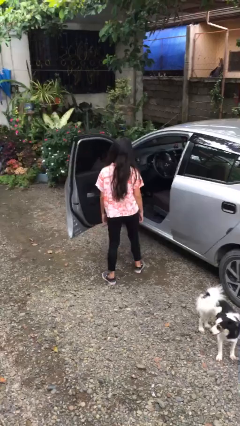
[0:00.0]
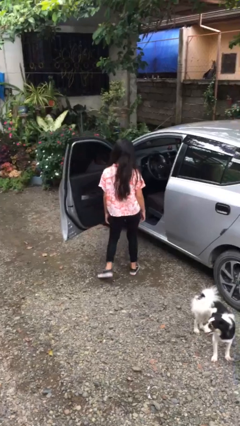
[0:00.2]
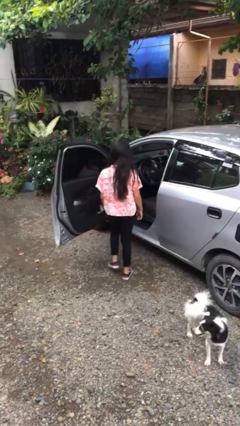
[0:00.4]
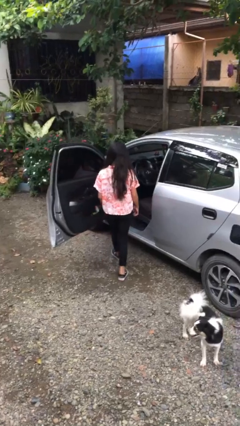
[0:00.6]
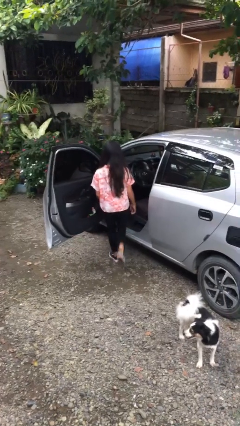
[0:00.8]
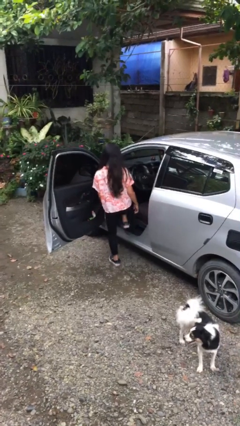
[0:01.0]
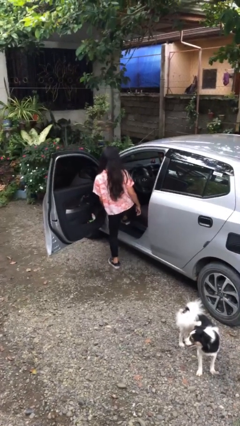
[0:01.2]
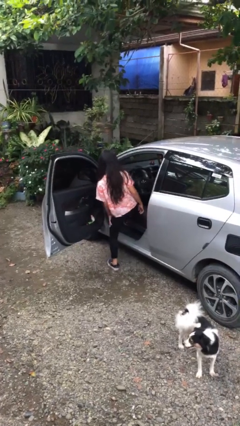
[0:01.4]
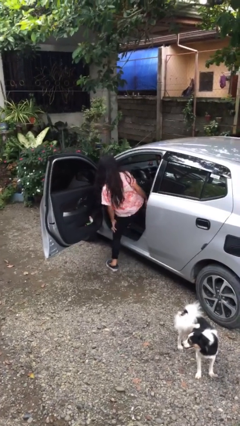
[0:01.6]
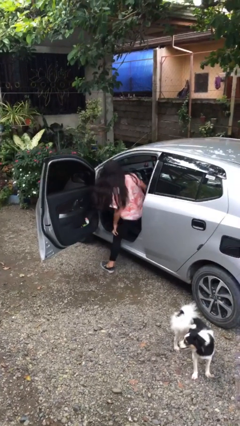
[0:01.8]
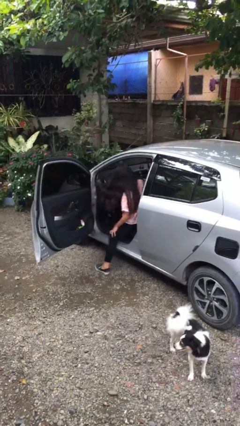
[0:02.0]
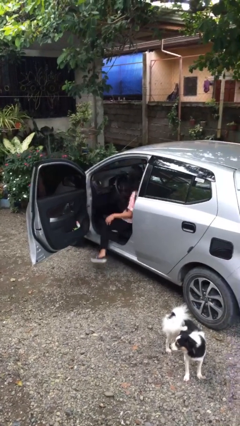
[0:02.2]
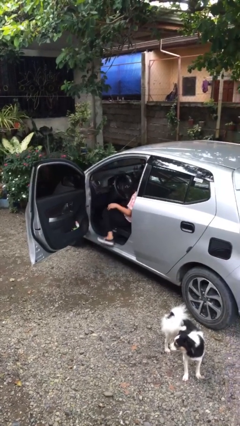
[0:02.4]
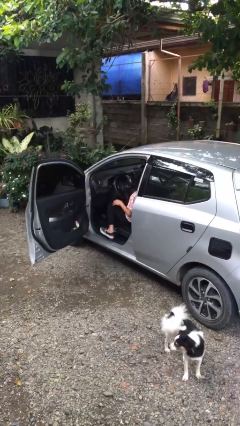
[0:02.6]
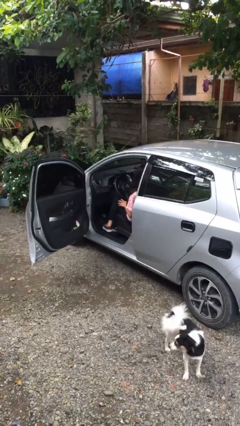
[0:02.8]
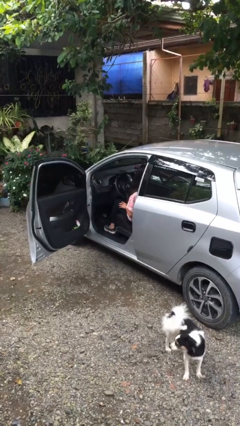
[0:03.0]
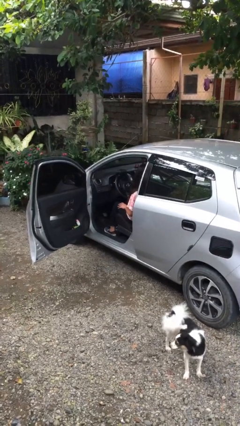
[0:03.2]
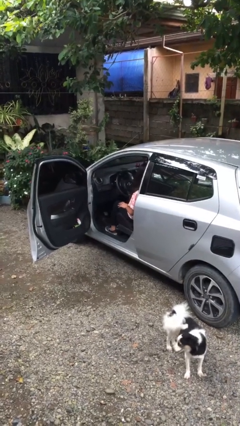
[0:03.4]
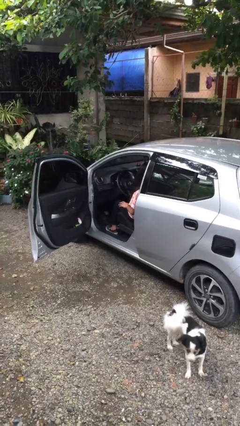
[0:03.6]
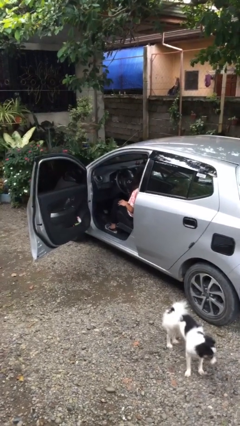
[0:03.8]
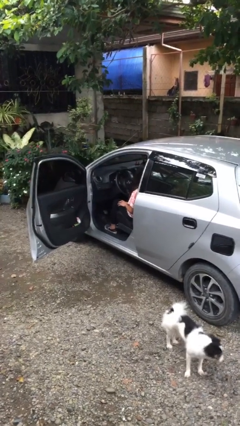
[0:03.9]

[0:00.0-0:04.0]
person enters car

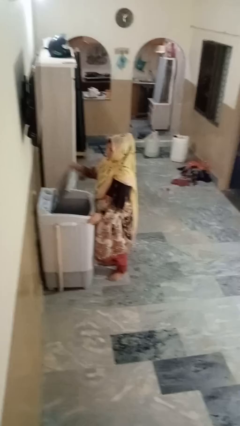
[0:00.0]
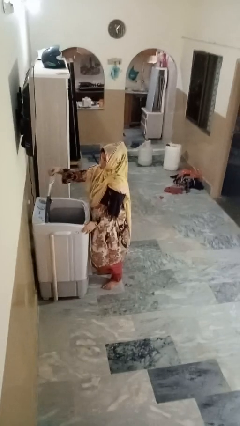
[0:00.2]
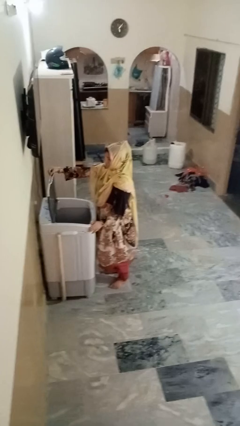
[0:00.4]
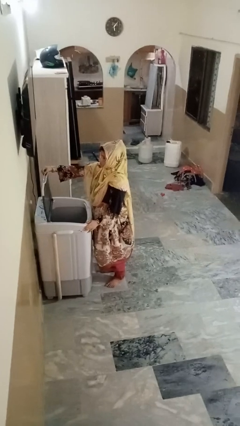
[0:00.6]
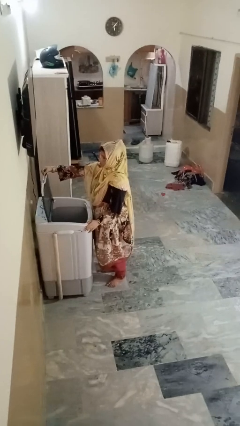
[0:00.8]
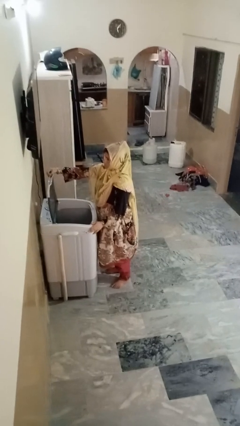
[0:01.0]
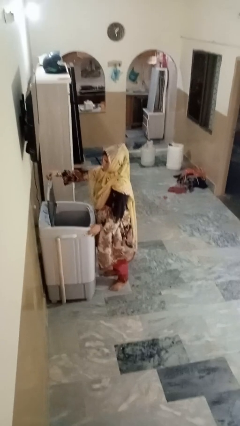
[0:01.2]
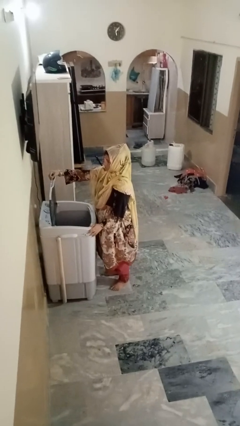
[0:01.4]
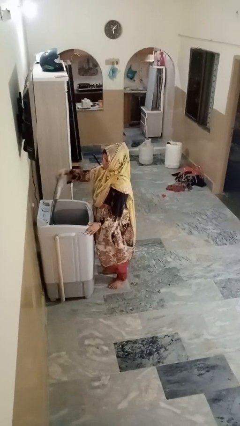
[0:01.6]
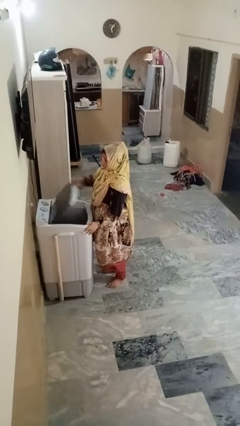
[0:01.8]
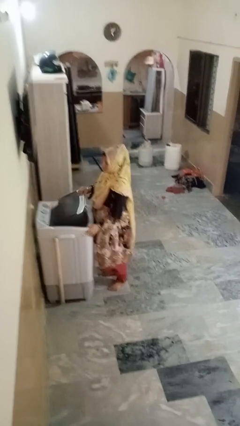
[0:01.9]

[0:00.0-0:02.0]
person opens clothes washer

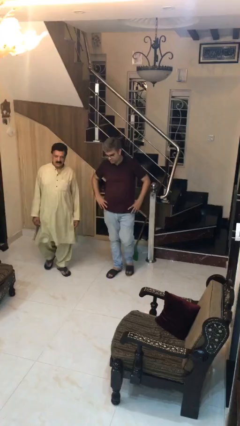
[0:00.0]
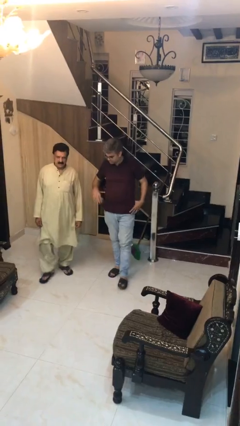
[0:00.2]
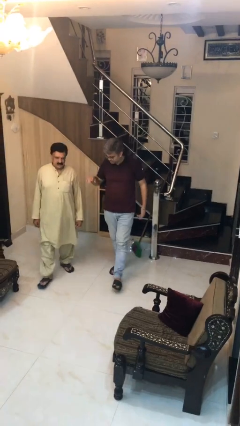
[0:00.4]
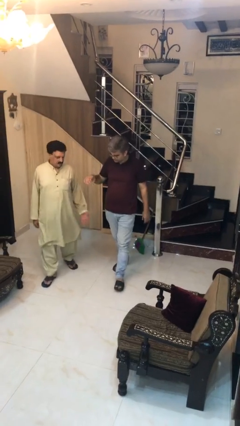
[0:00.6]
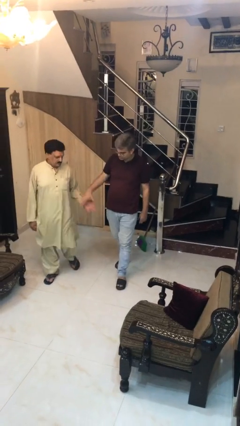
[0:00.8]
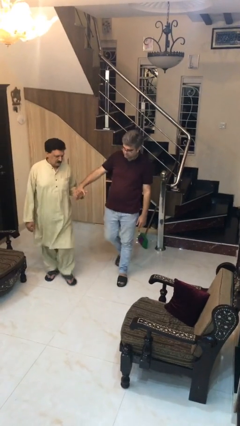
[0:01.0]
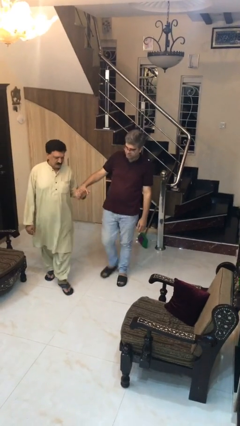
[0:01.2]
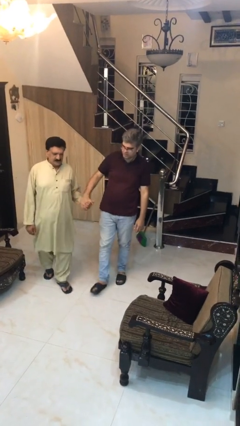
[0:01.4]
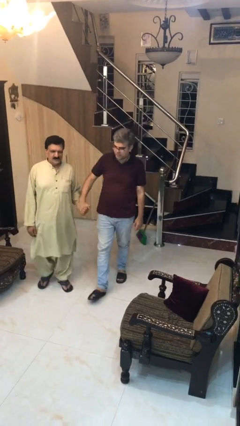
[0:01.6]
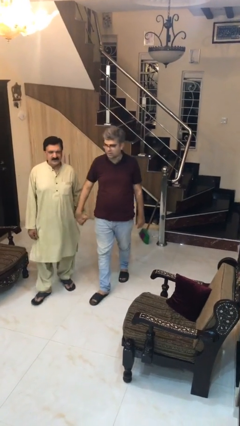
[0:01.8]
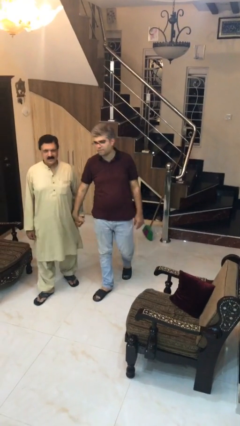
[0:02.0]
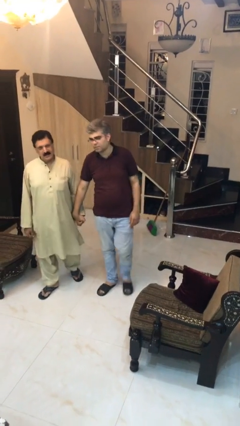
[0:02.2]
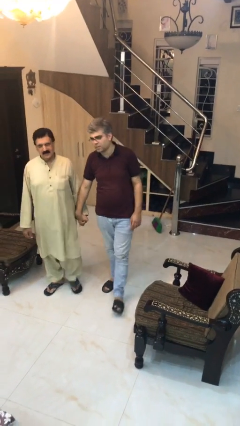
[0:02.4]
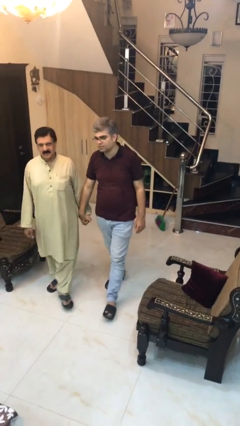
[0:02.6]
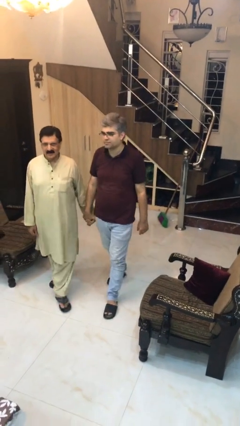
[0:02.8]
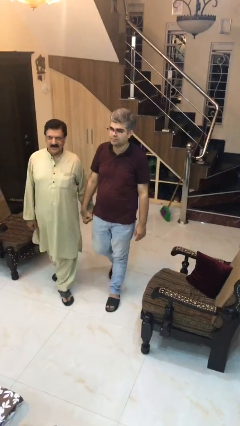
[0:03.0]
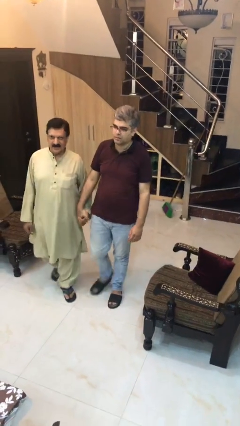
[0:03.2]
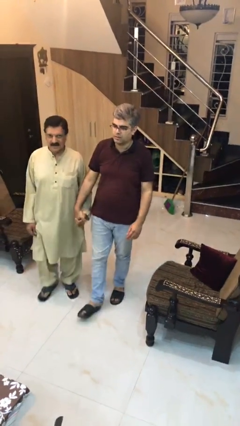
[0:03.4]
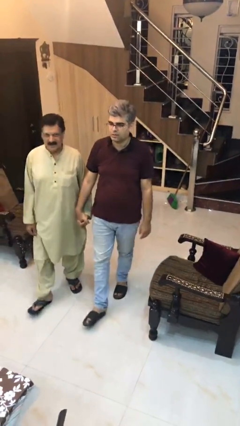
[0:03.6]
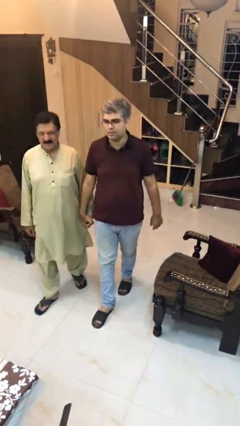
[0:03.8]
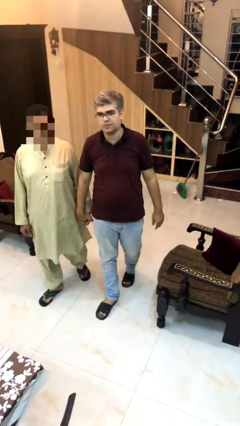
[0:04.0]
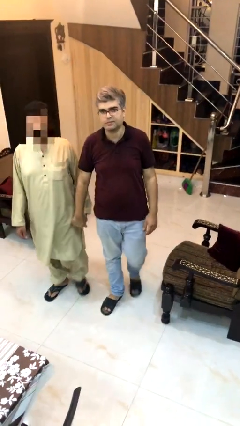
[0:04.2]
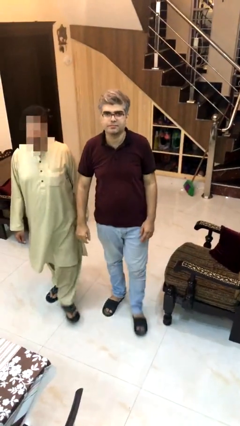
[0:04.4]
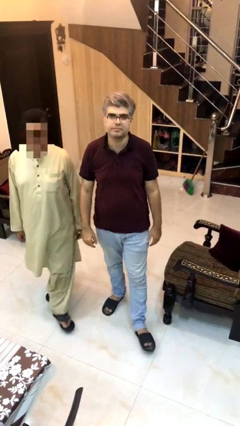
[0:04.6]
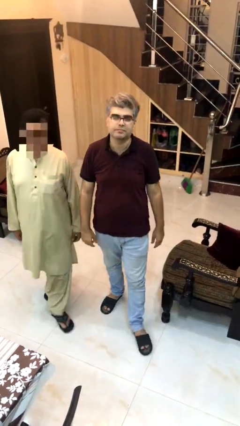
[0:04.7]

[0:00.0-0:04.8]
person holds hand

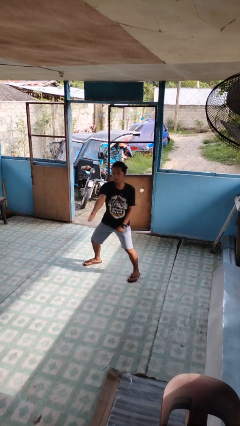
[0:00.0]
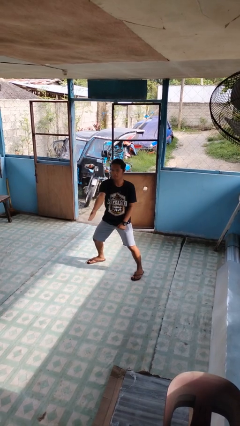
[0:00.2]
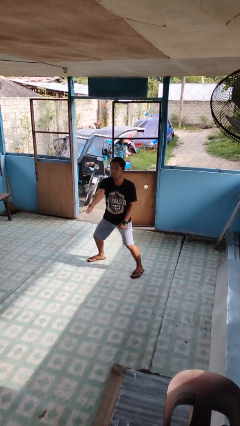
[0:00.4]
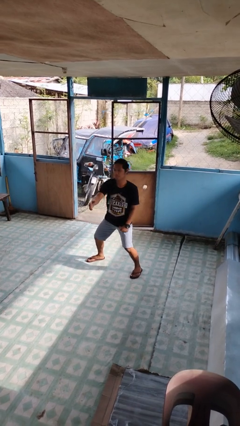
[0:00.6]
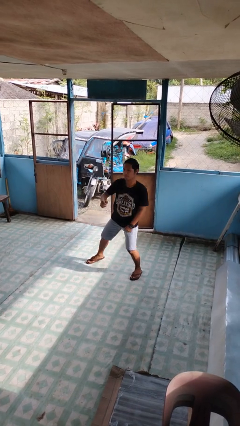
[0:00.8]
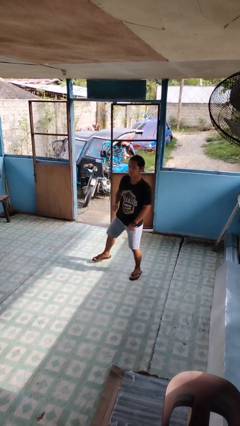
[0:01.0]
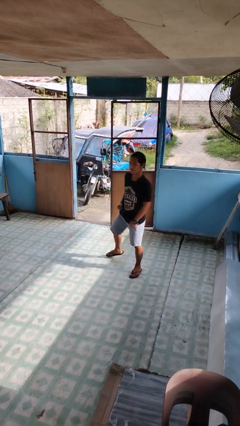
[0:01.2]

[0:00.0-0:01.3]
person karate chop

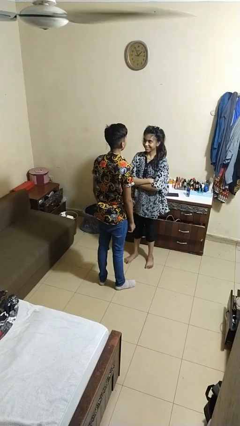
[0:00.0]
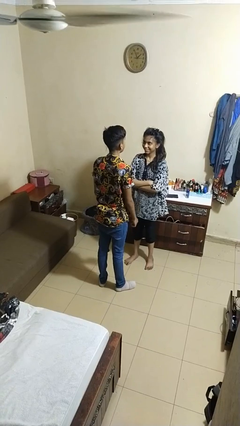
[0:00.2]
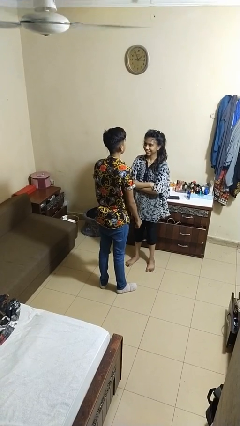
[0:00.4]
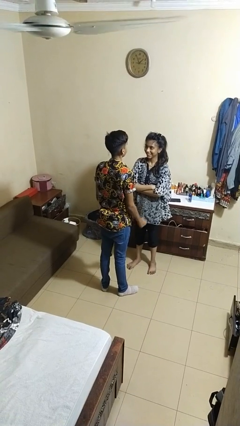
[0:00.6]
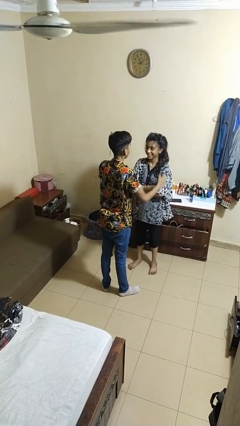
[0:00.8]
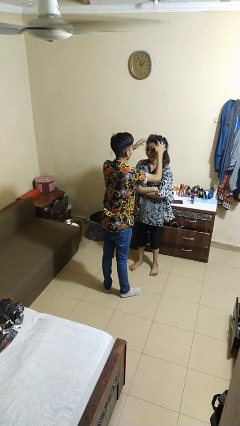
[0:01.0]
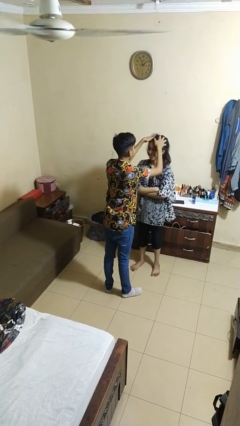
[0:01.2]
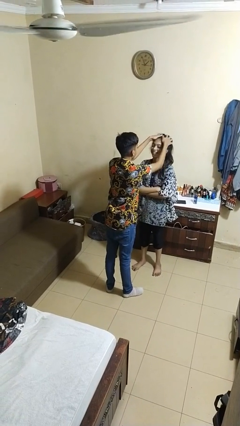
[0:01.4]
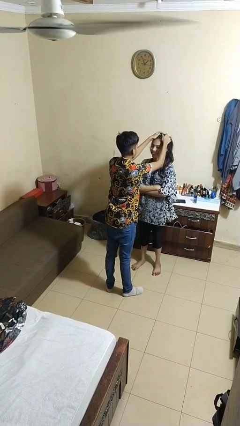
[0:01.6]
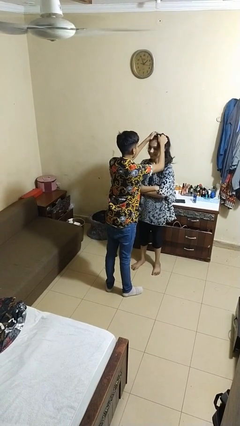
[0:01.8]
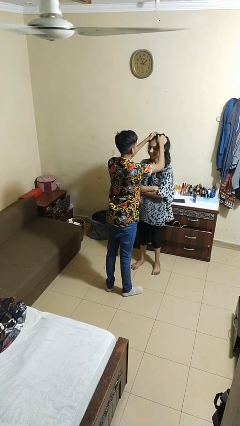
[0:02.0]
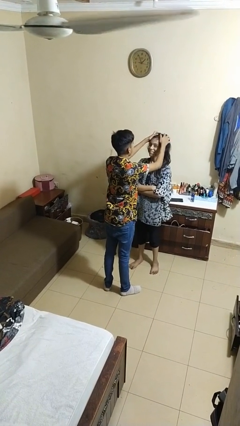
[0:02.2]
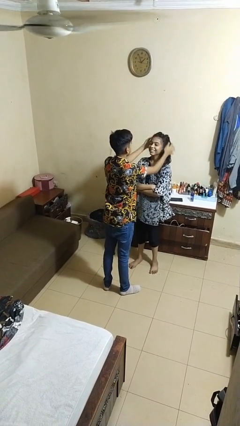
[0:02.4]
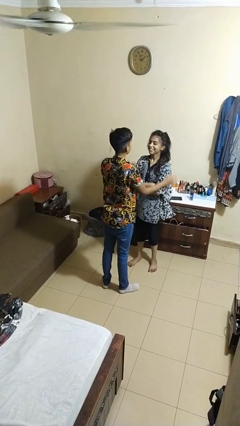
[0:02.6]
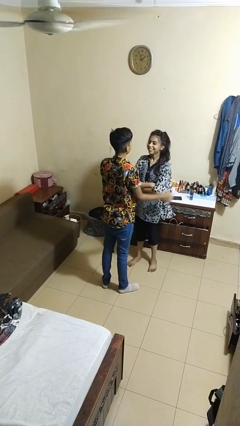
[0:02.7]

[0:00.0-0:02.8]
person grabs person by hair

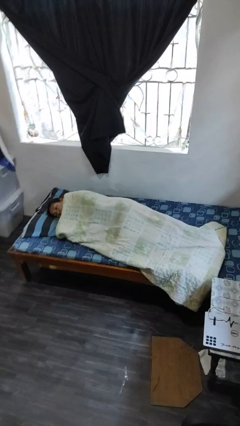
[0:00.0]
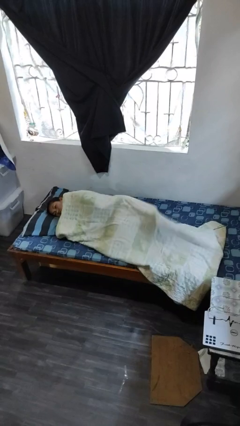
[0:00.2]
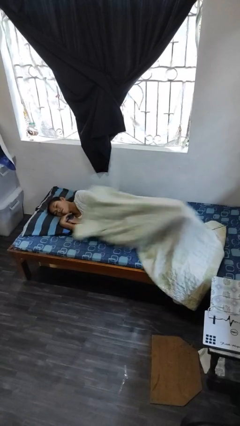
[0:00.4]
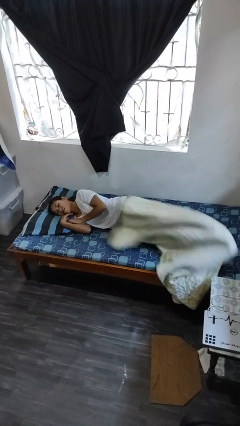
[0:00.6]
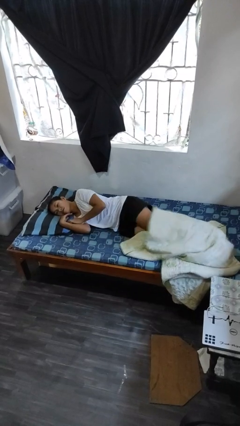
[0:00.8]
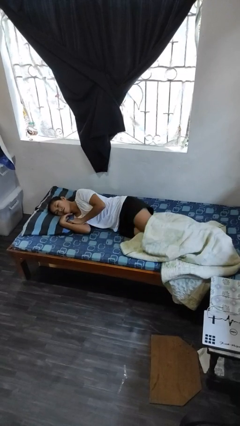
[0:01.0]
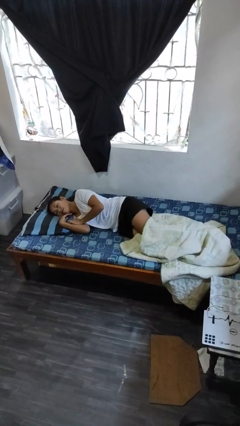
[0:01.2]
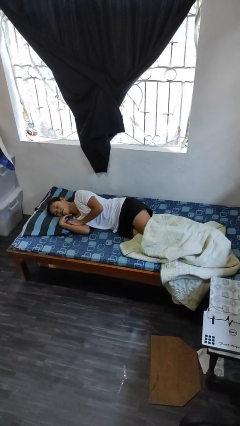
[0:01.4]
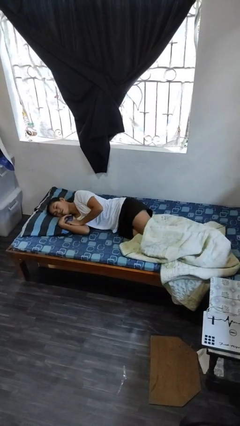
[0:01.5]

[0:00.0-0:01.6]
person uncovers with bedsheets

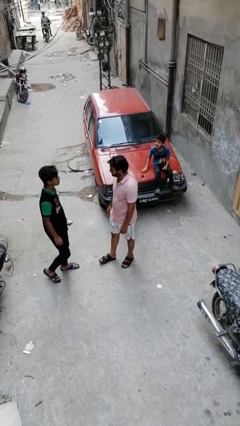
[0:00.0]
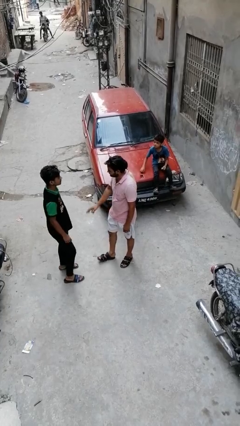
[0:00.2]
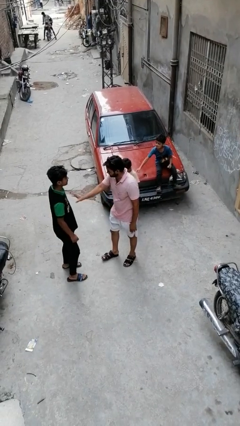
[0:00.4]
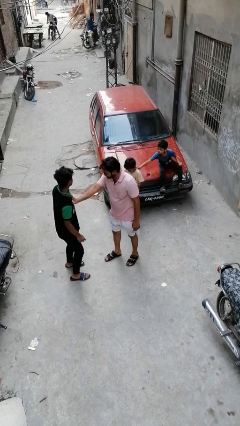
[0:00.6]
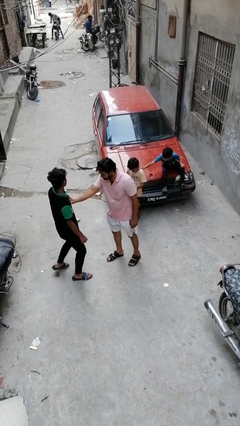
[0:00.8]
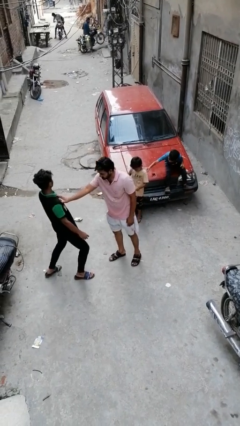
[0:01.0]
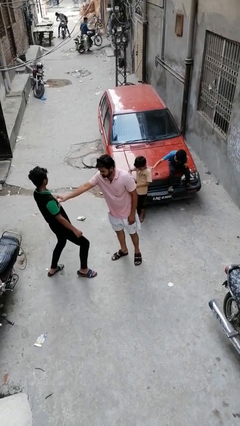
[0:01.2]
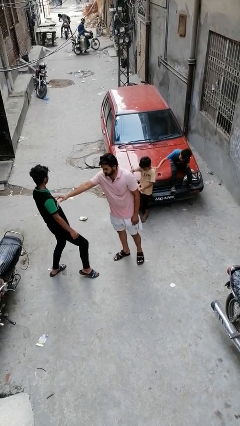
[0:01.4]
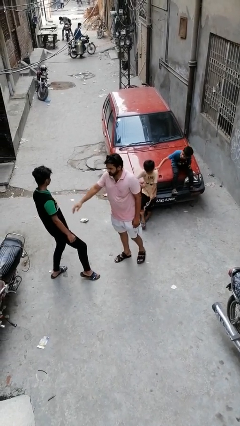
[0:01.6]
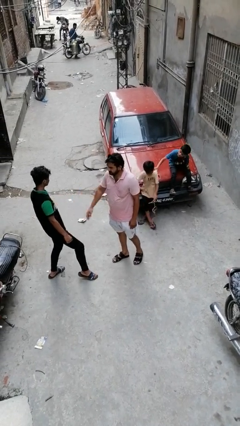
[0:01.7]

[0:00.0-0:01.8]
person shoves person
